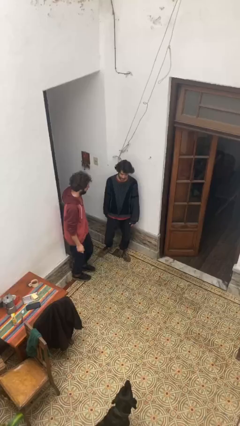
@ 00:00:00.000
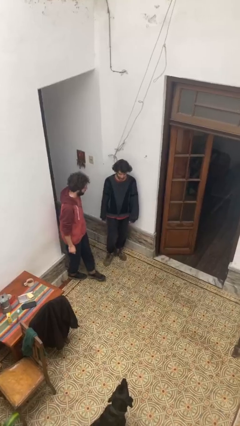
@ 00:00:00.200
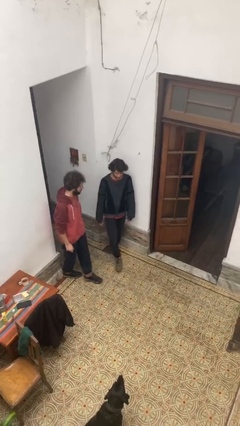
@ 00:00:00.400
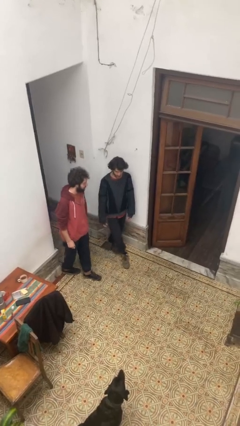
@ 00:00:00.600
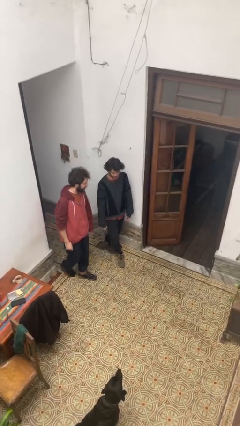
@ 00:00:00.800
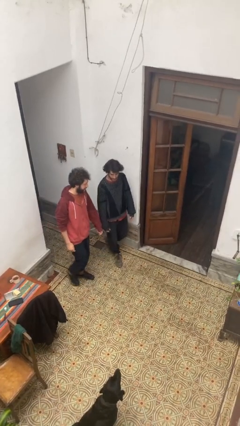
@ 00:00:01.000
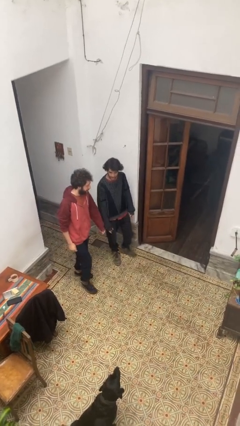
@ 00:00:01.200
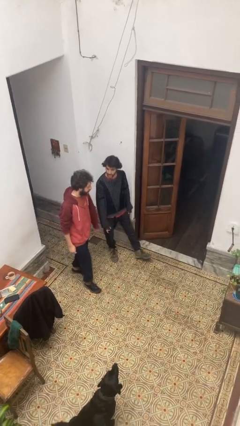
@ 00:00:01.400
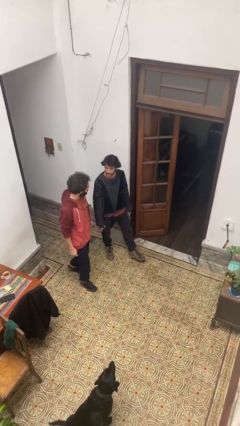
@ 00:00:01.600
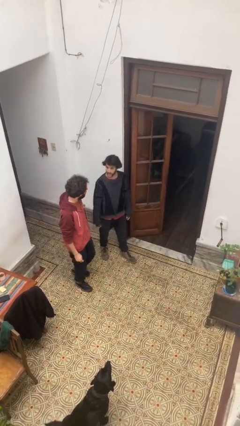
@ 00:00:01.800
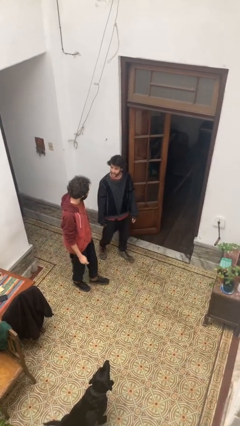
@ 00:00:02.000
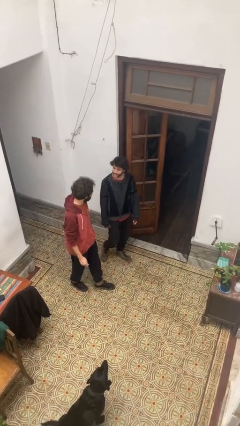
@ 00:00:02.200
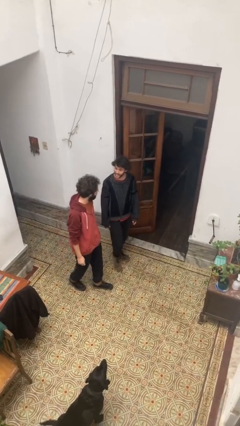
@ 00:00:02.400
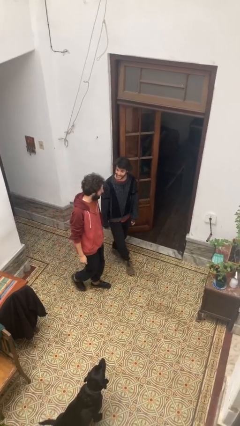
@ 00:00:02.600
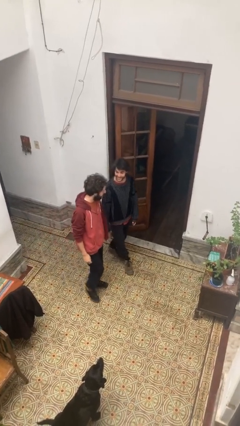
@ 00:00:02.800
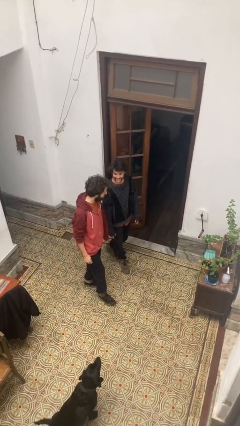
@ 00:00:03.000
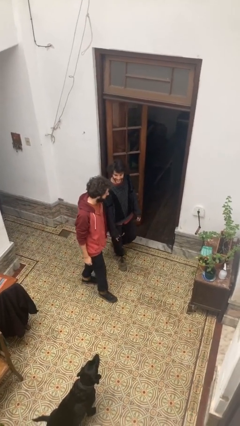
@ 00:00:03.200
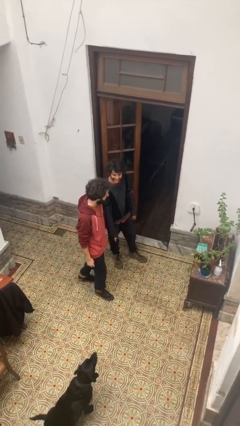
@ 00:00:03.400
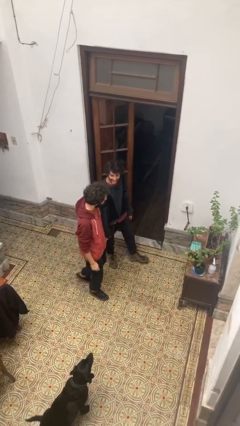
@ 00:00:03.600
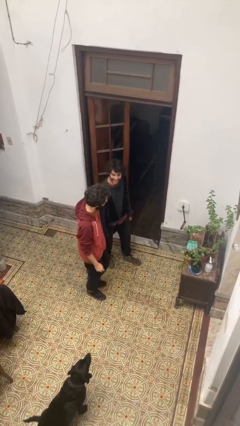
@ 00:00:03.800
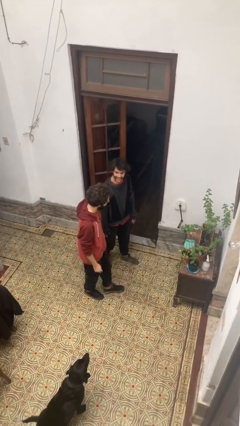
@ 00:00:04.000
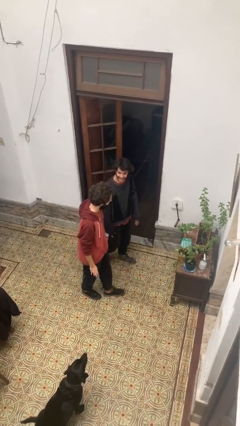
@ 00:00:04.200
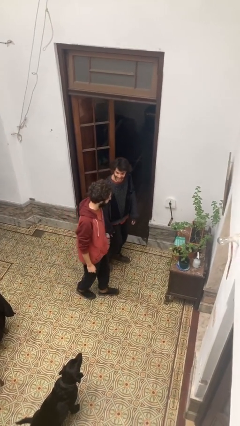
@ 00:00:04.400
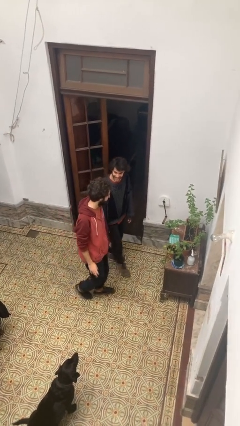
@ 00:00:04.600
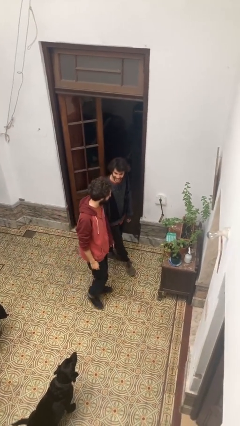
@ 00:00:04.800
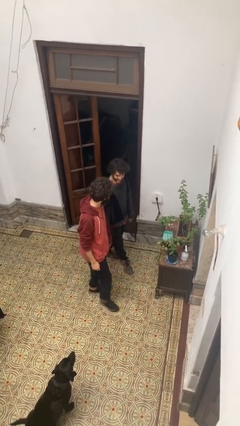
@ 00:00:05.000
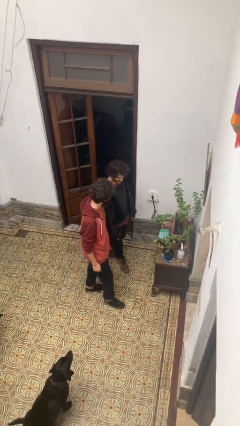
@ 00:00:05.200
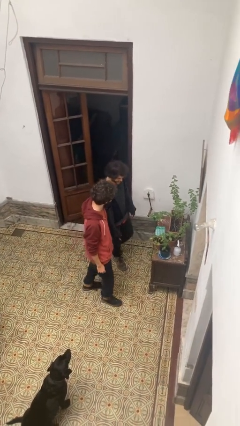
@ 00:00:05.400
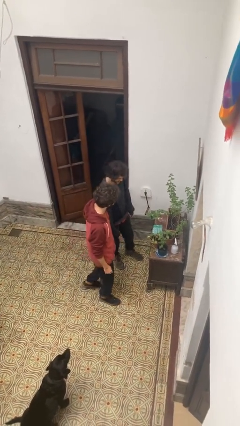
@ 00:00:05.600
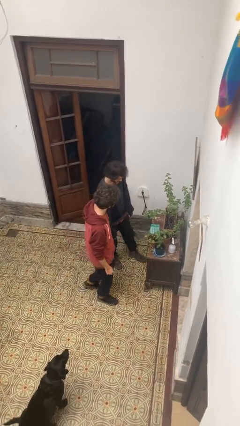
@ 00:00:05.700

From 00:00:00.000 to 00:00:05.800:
person talks to person

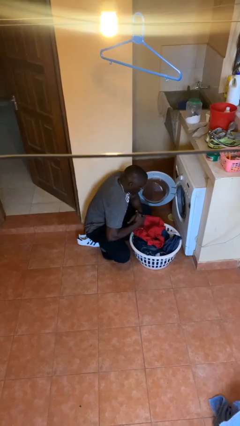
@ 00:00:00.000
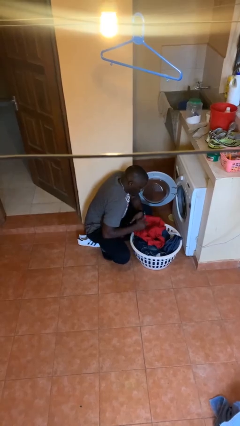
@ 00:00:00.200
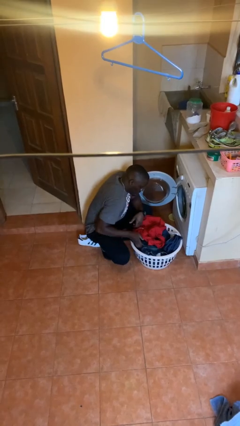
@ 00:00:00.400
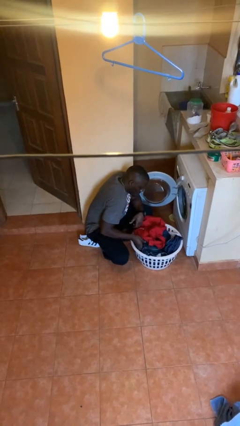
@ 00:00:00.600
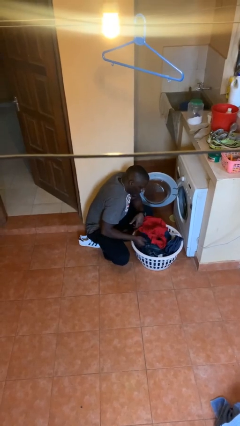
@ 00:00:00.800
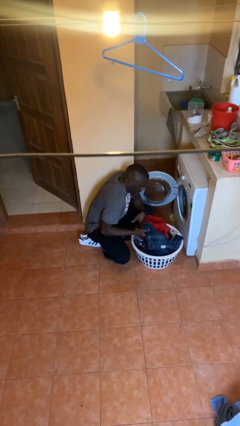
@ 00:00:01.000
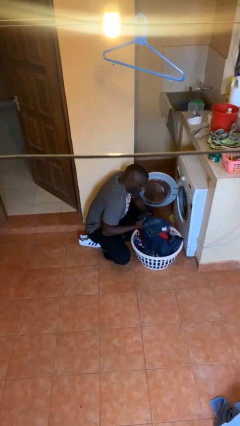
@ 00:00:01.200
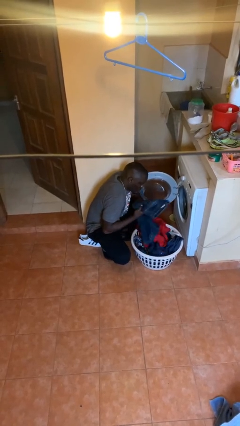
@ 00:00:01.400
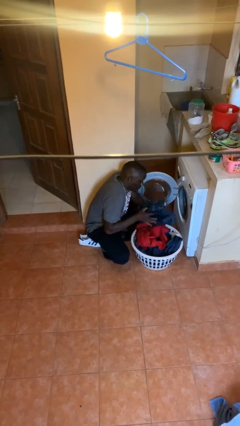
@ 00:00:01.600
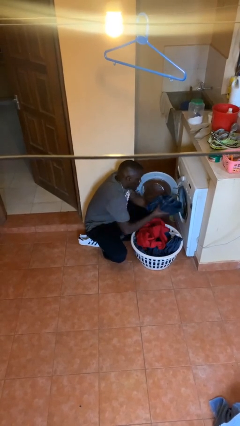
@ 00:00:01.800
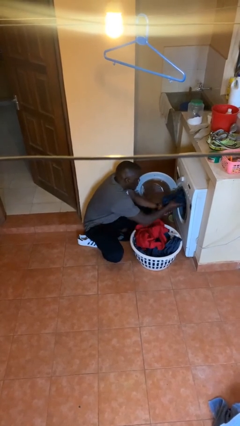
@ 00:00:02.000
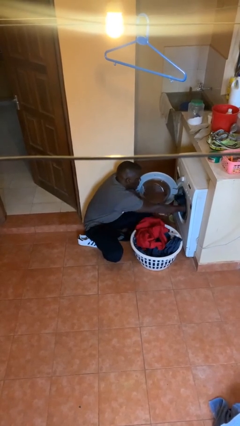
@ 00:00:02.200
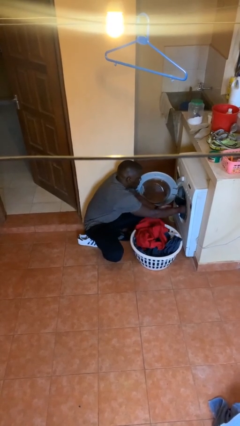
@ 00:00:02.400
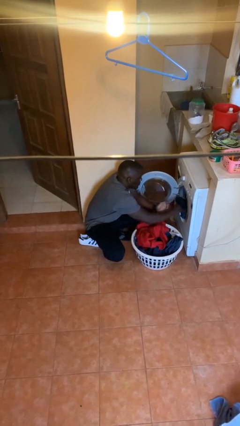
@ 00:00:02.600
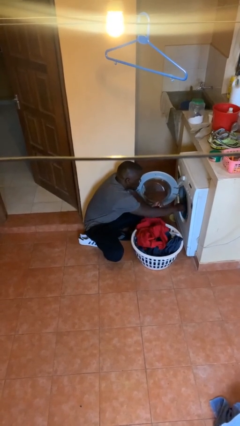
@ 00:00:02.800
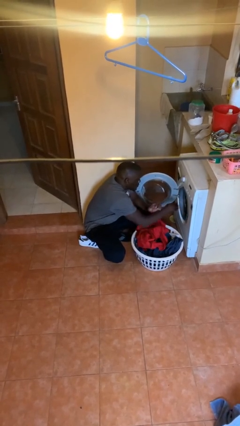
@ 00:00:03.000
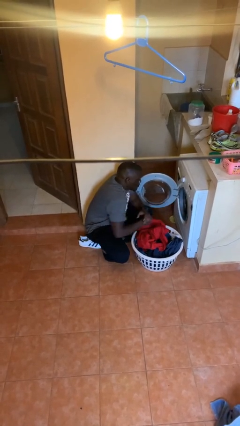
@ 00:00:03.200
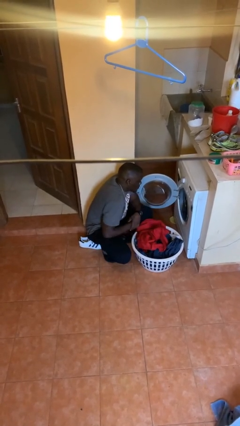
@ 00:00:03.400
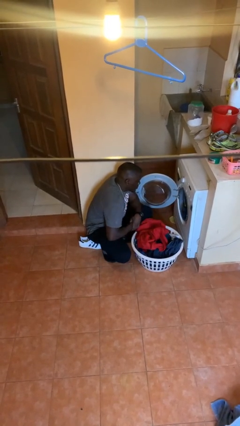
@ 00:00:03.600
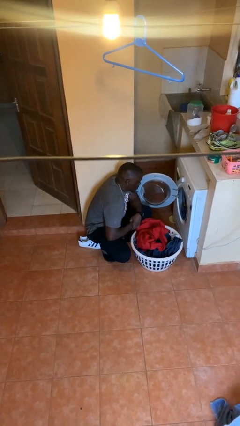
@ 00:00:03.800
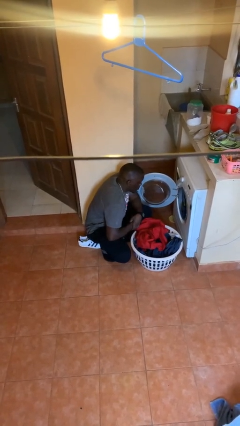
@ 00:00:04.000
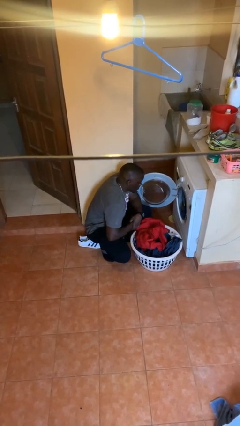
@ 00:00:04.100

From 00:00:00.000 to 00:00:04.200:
person loads dryer

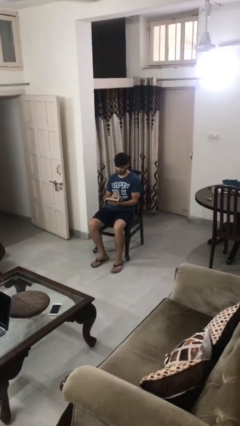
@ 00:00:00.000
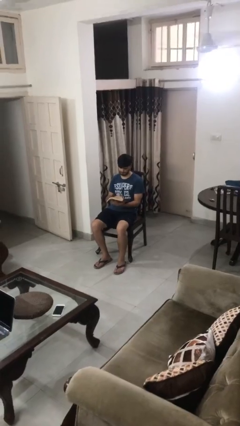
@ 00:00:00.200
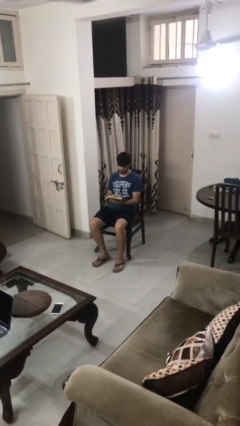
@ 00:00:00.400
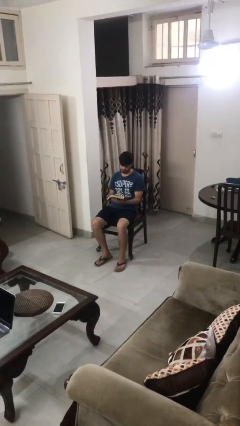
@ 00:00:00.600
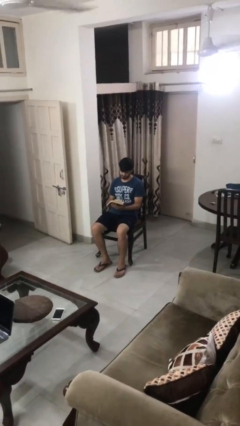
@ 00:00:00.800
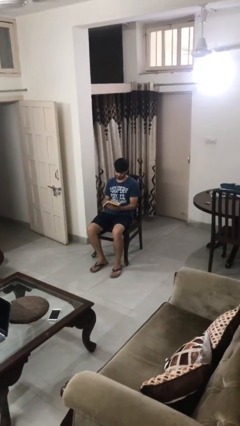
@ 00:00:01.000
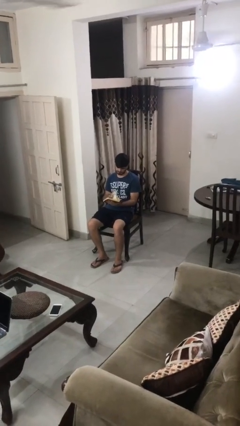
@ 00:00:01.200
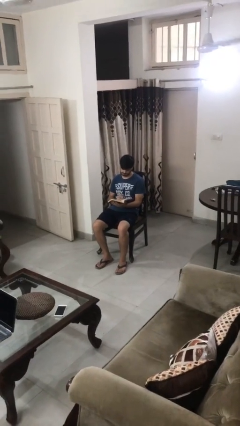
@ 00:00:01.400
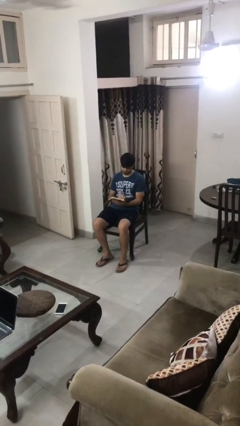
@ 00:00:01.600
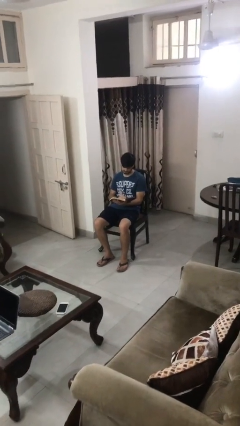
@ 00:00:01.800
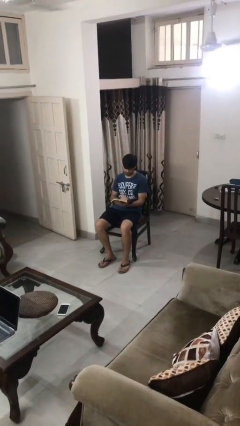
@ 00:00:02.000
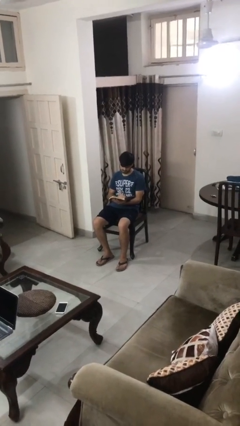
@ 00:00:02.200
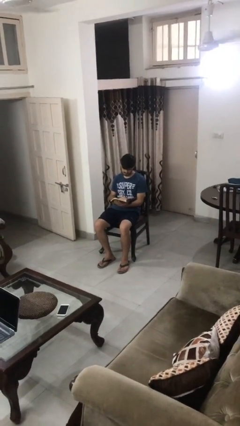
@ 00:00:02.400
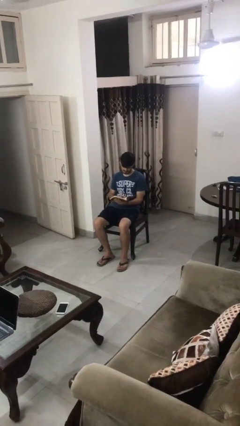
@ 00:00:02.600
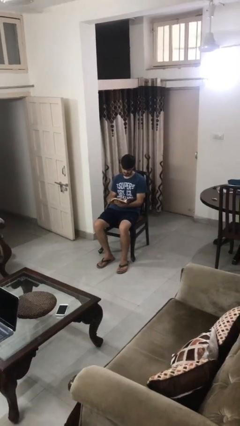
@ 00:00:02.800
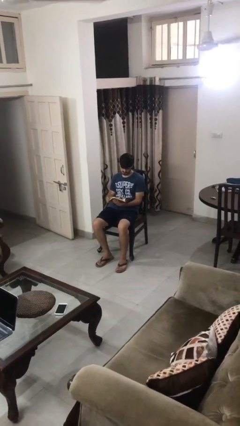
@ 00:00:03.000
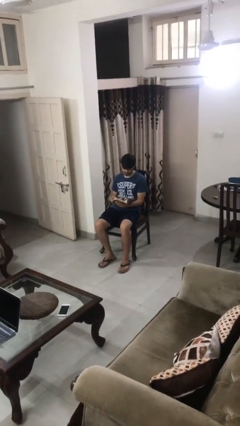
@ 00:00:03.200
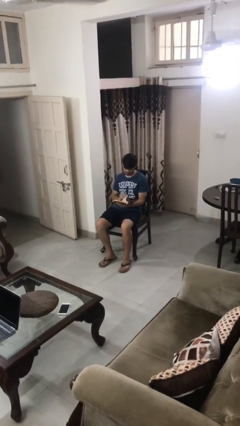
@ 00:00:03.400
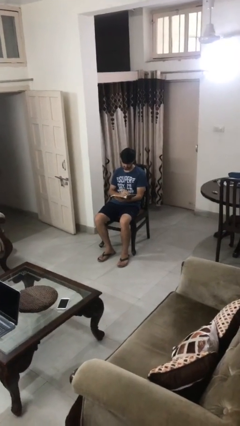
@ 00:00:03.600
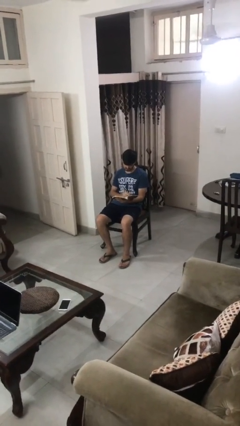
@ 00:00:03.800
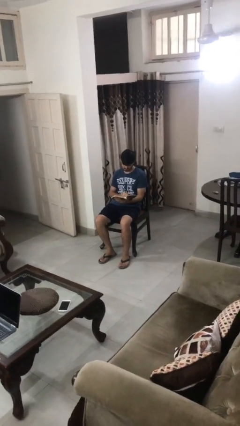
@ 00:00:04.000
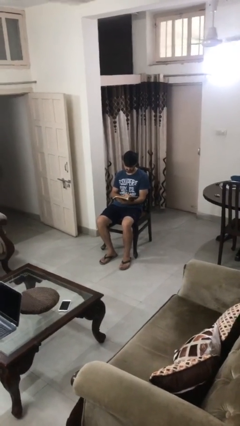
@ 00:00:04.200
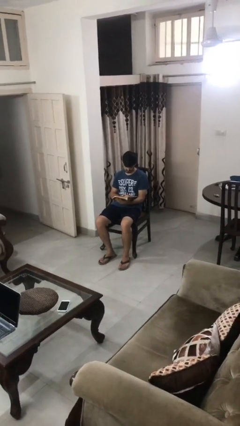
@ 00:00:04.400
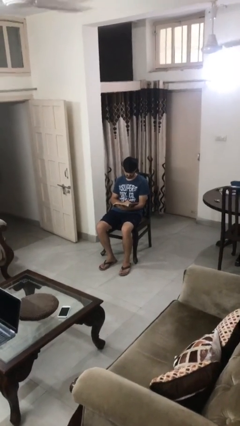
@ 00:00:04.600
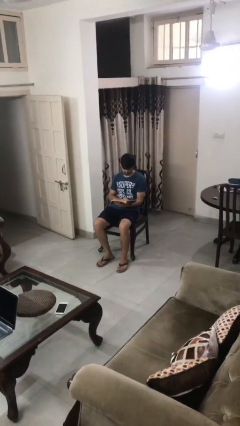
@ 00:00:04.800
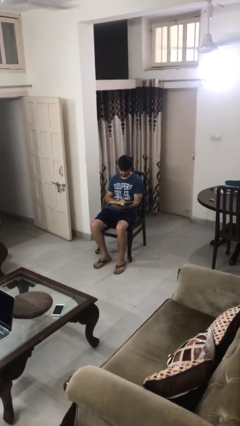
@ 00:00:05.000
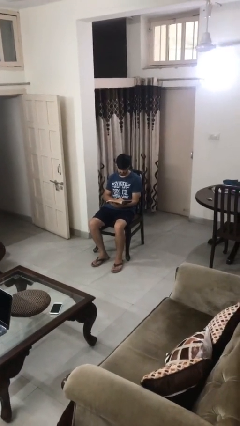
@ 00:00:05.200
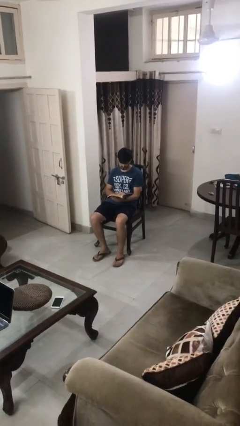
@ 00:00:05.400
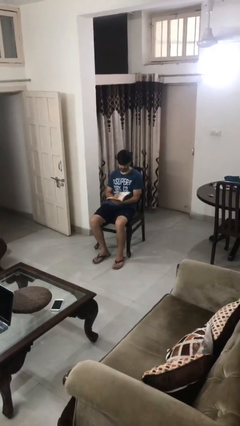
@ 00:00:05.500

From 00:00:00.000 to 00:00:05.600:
person reads book

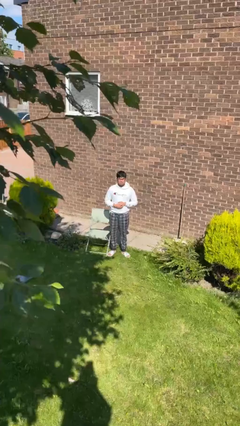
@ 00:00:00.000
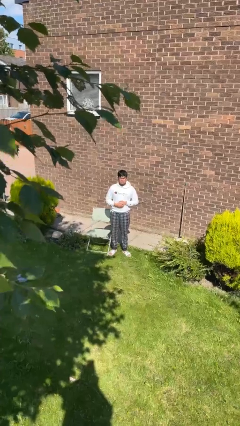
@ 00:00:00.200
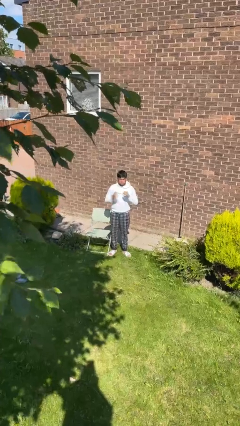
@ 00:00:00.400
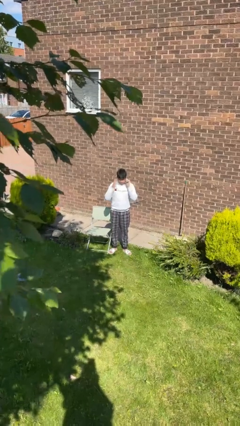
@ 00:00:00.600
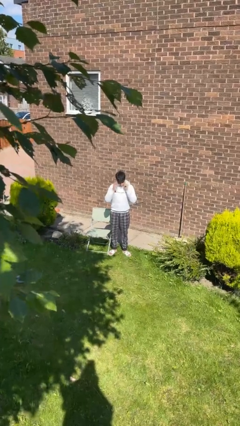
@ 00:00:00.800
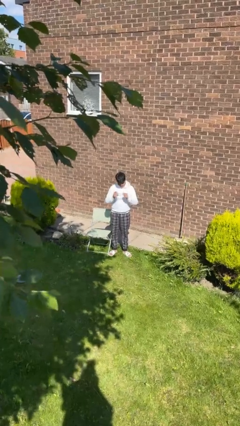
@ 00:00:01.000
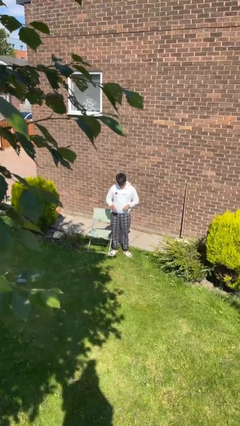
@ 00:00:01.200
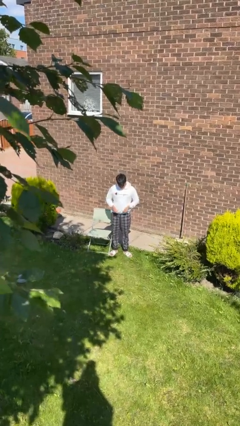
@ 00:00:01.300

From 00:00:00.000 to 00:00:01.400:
person takes off glasses

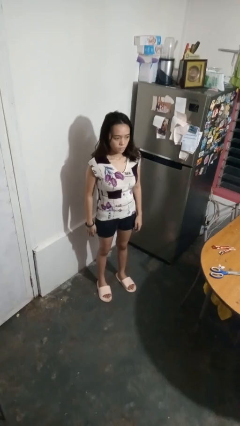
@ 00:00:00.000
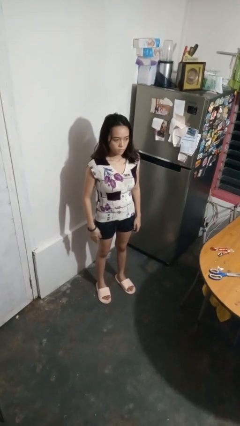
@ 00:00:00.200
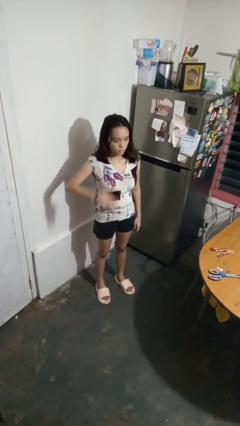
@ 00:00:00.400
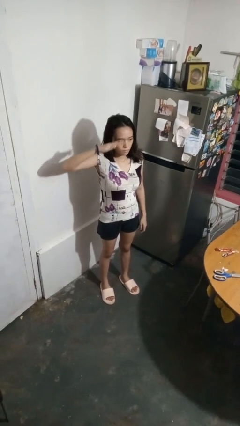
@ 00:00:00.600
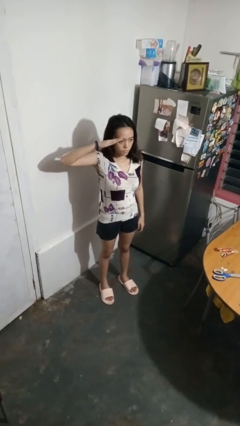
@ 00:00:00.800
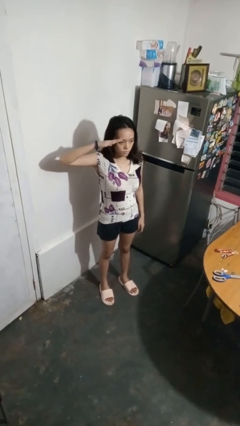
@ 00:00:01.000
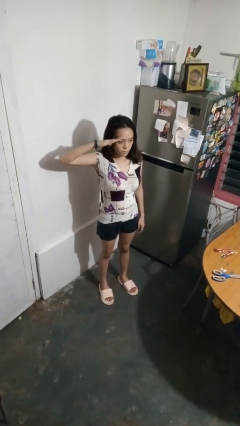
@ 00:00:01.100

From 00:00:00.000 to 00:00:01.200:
person salutes
